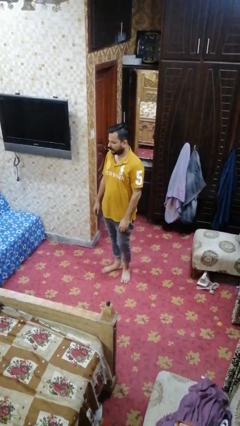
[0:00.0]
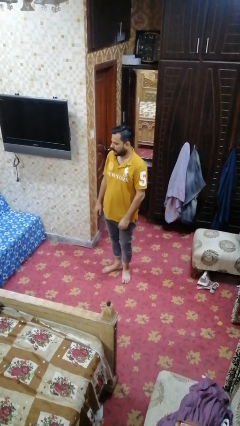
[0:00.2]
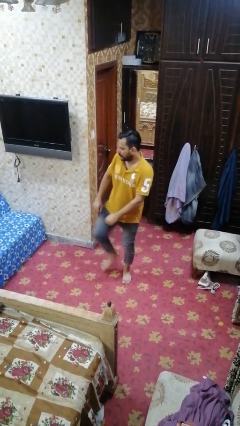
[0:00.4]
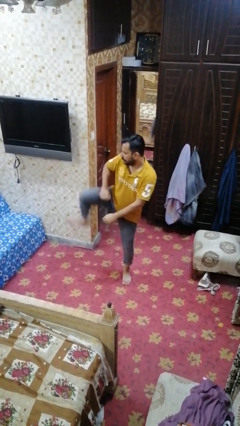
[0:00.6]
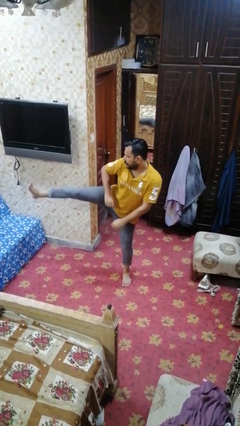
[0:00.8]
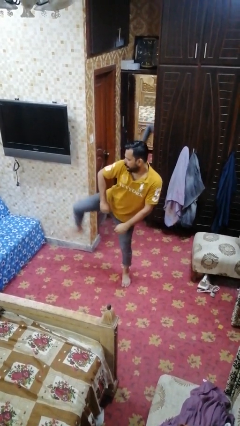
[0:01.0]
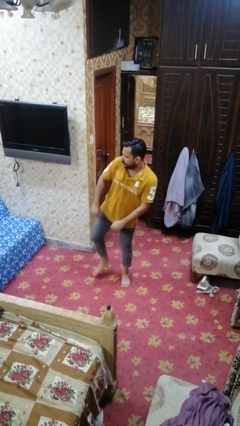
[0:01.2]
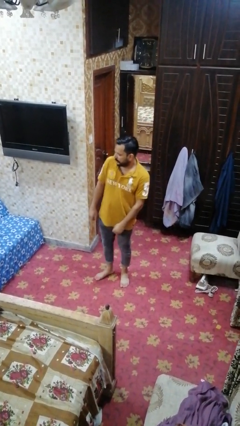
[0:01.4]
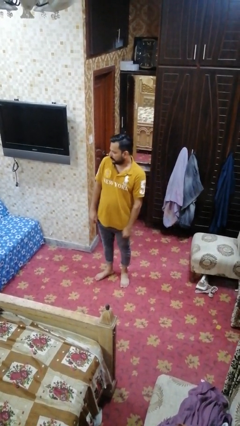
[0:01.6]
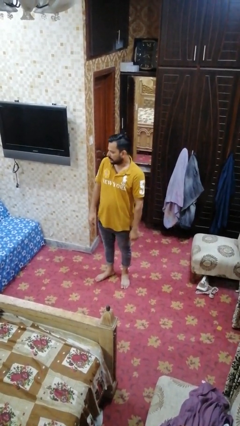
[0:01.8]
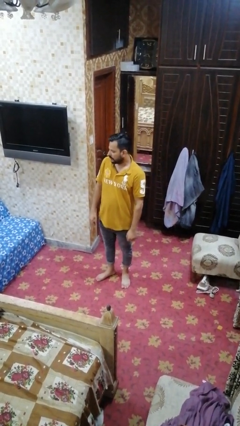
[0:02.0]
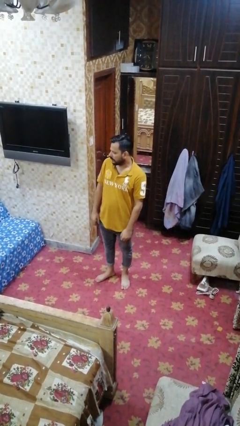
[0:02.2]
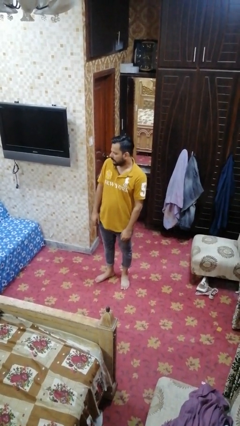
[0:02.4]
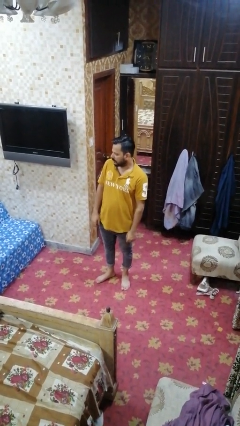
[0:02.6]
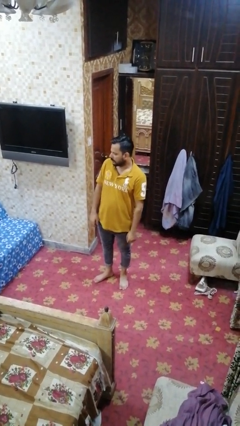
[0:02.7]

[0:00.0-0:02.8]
person karate kicks

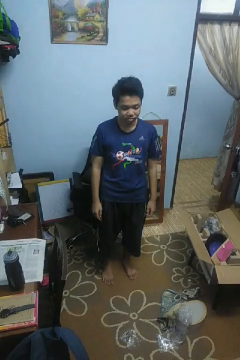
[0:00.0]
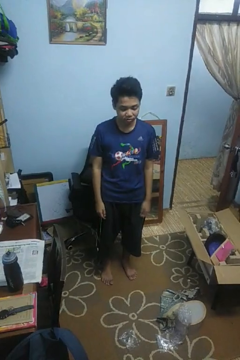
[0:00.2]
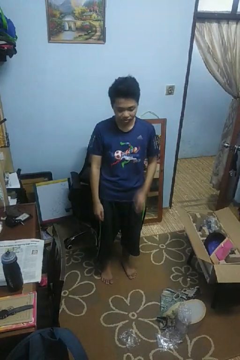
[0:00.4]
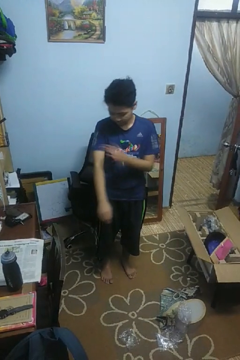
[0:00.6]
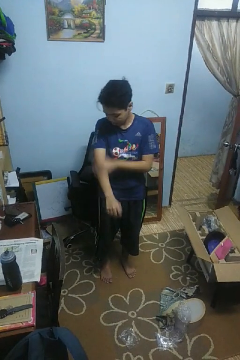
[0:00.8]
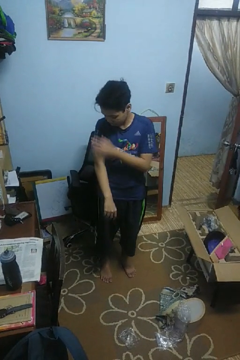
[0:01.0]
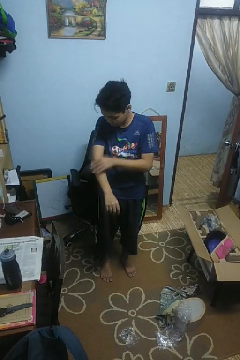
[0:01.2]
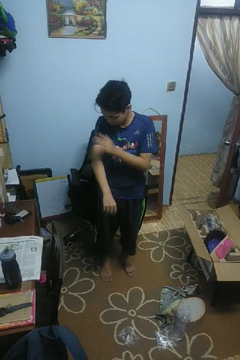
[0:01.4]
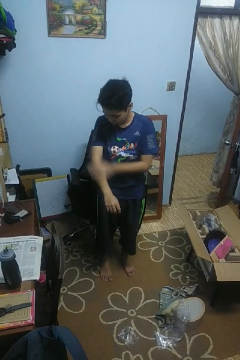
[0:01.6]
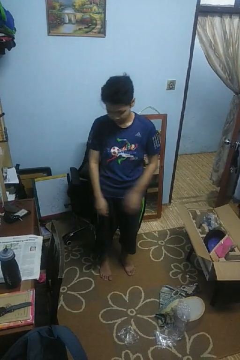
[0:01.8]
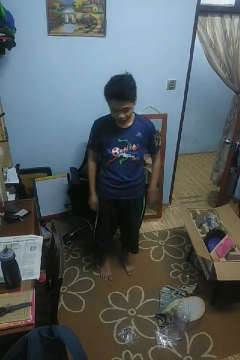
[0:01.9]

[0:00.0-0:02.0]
person swats bug

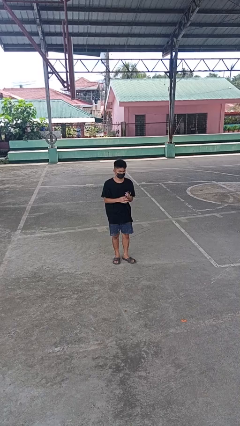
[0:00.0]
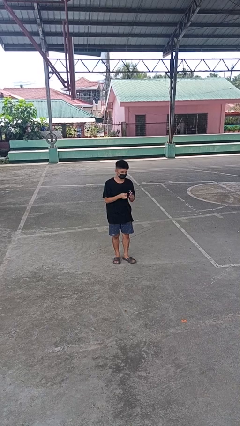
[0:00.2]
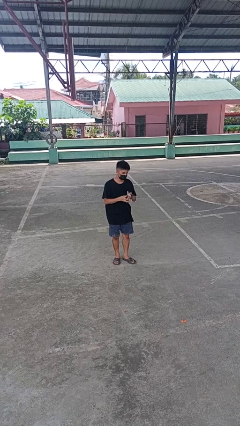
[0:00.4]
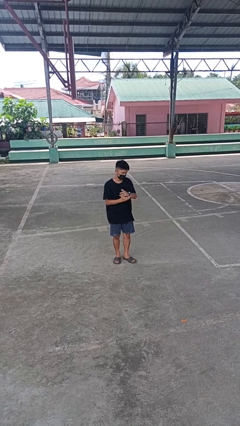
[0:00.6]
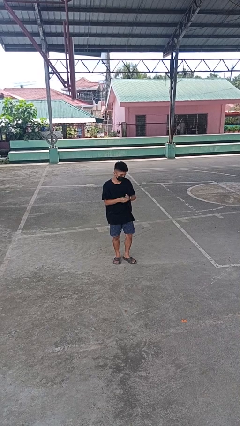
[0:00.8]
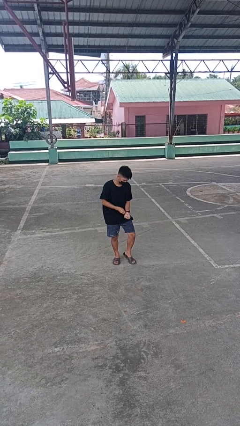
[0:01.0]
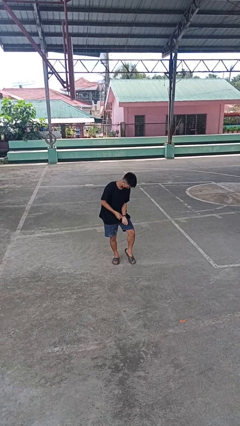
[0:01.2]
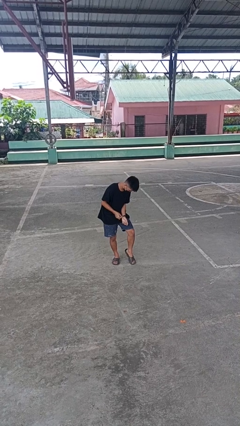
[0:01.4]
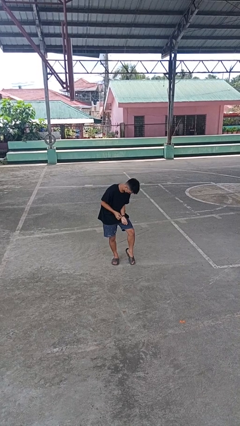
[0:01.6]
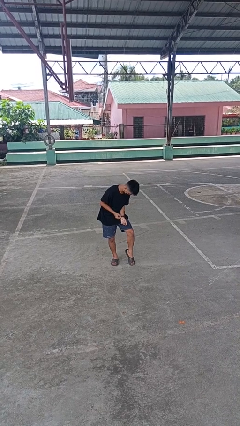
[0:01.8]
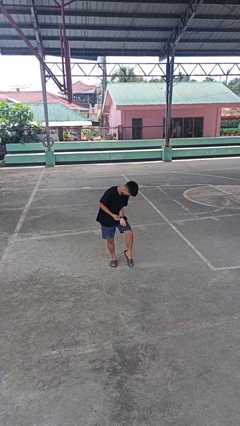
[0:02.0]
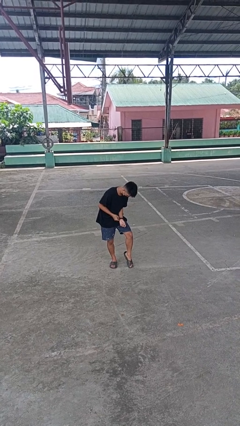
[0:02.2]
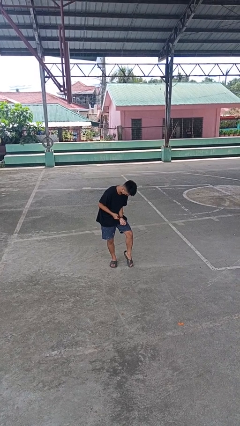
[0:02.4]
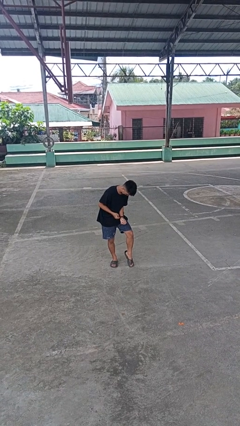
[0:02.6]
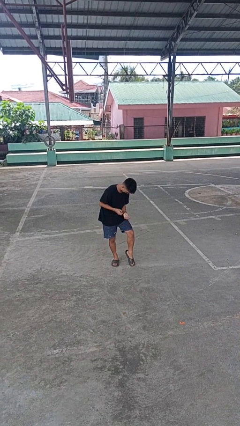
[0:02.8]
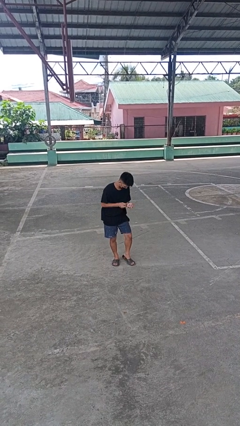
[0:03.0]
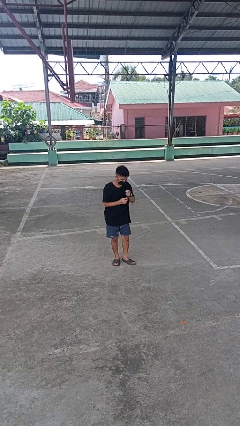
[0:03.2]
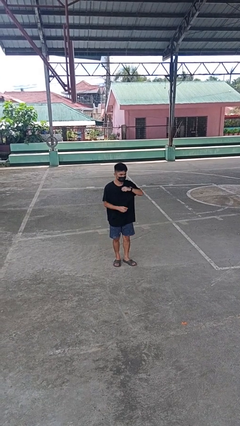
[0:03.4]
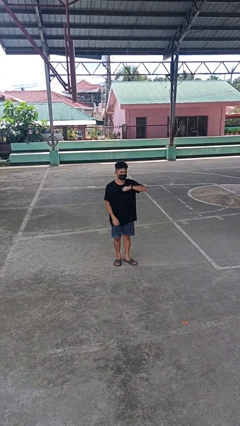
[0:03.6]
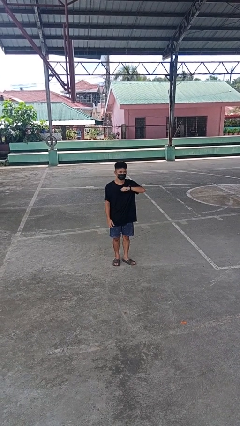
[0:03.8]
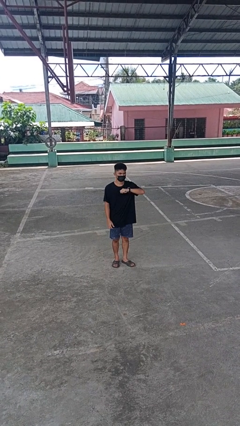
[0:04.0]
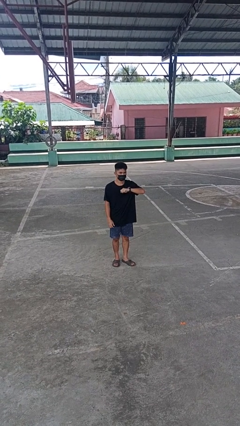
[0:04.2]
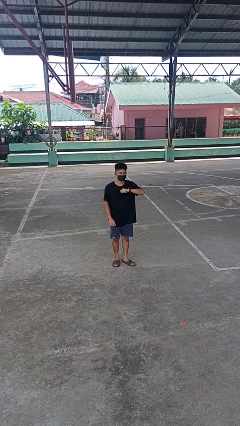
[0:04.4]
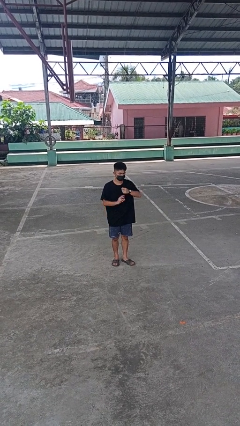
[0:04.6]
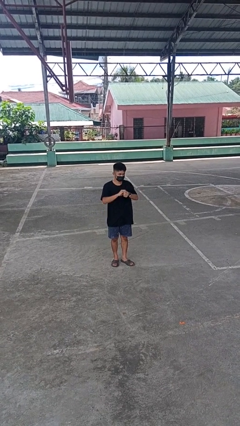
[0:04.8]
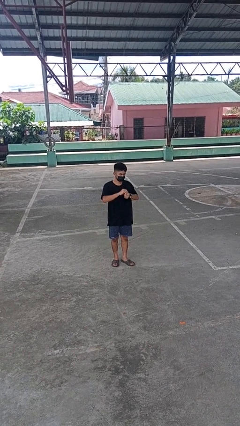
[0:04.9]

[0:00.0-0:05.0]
person puts on wristwatch

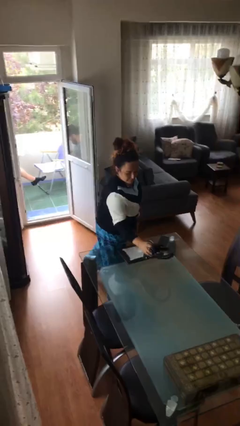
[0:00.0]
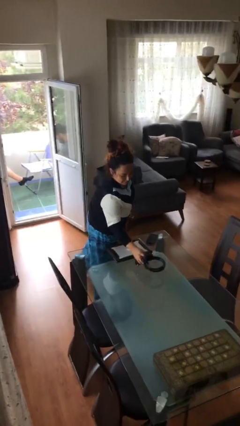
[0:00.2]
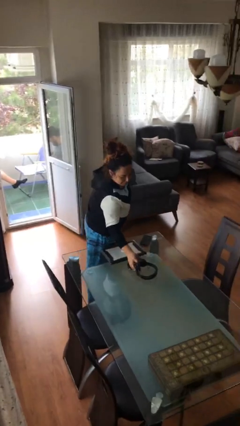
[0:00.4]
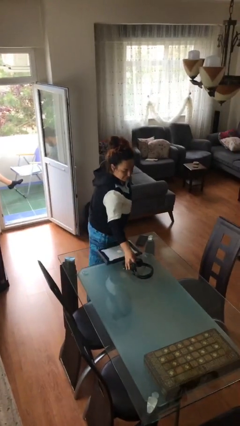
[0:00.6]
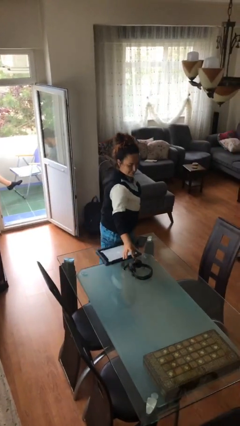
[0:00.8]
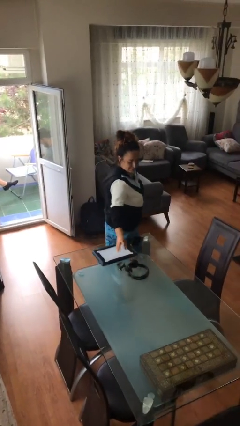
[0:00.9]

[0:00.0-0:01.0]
person puts down object on table

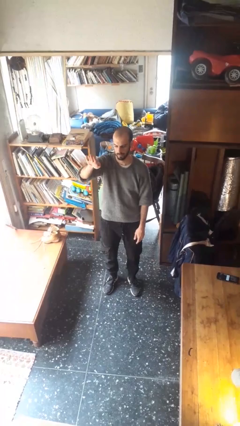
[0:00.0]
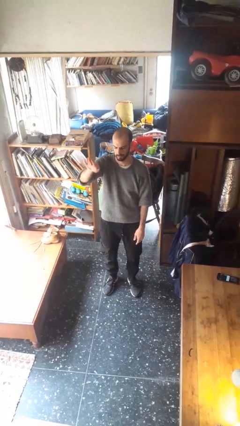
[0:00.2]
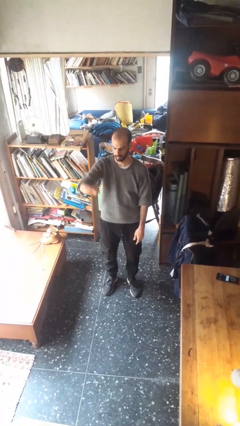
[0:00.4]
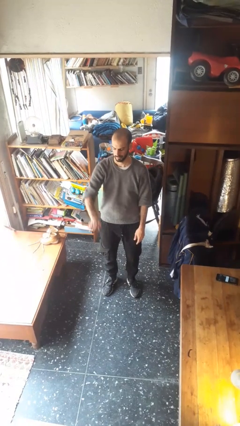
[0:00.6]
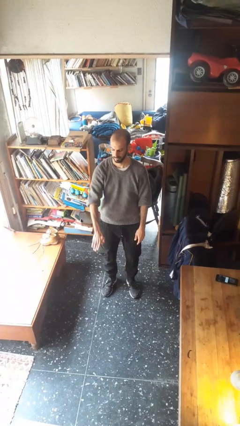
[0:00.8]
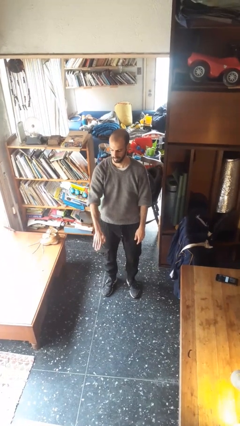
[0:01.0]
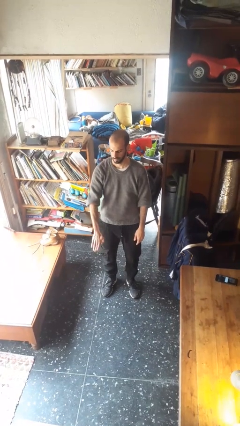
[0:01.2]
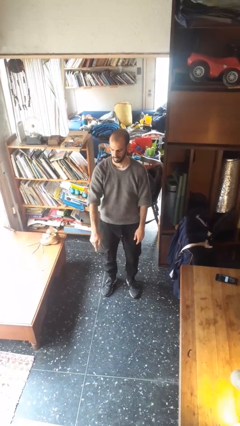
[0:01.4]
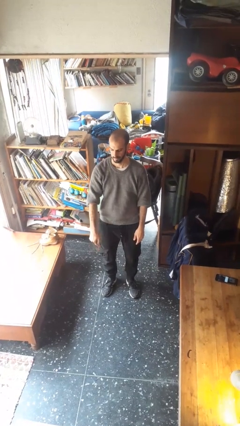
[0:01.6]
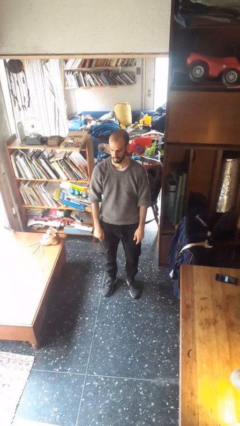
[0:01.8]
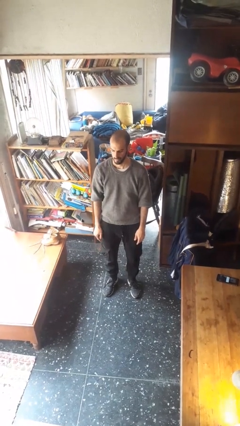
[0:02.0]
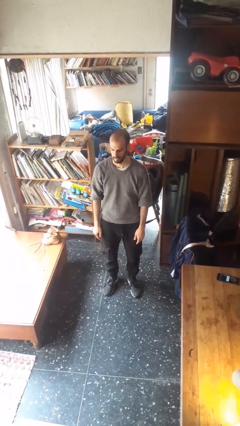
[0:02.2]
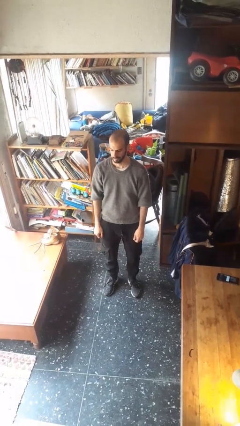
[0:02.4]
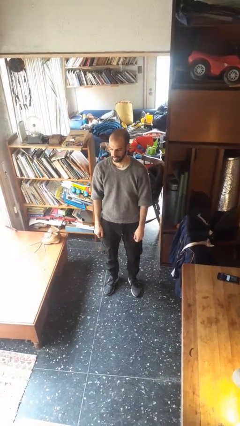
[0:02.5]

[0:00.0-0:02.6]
person gestures swipe down

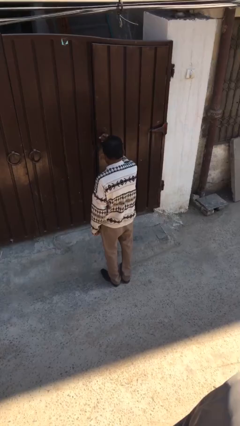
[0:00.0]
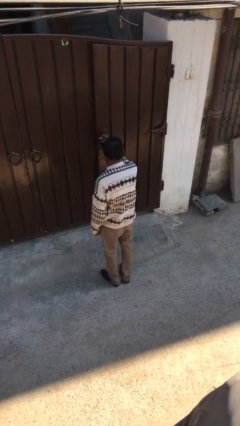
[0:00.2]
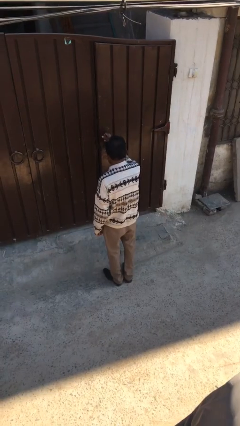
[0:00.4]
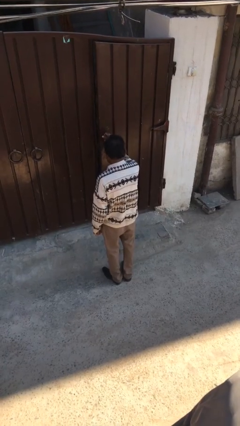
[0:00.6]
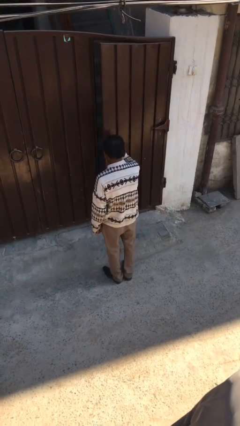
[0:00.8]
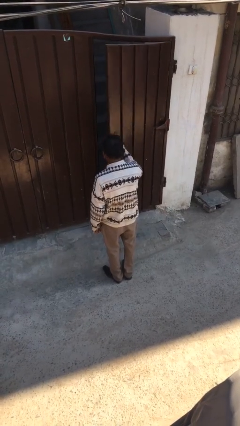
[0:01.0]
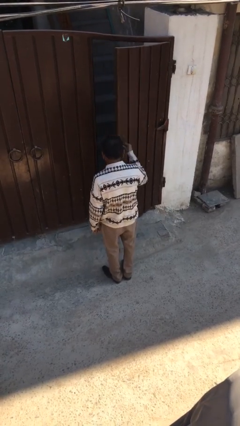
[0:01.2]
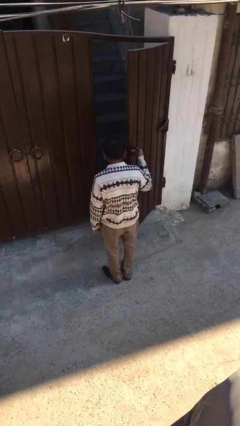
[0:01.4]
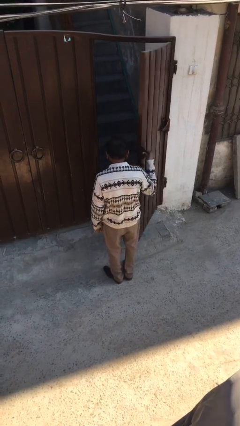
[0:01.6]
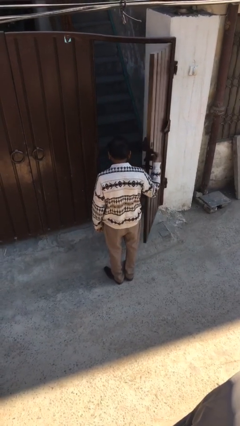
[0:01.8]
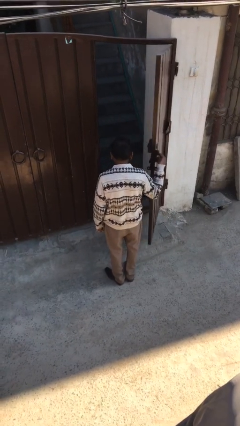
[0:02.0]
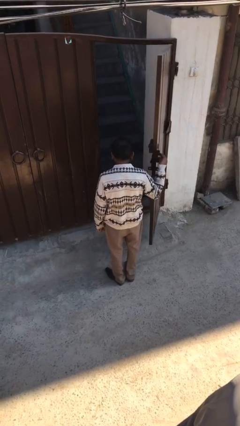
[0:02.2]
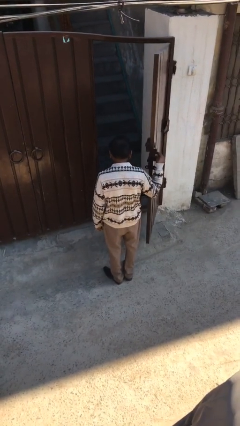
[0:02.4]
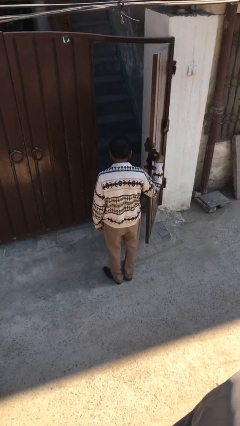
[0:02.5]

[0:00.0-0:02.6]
person opens facility door

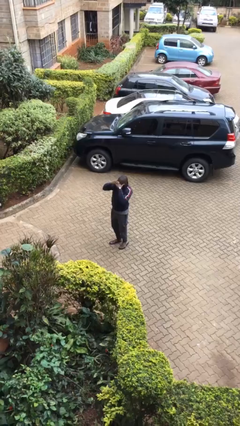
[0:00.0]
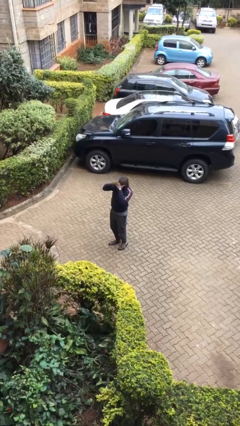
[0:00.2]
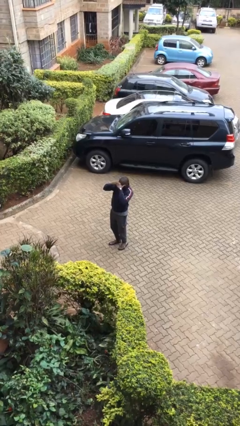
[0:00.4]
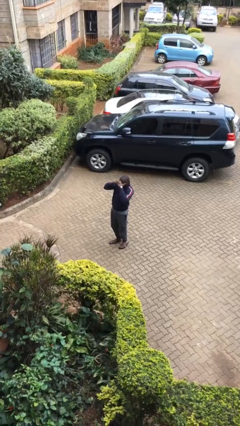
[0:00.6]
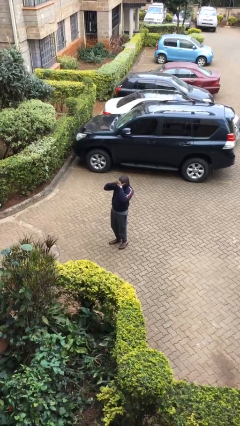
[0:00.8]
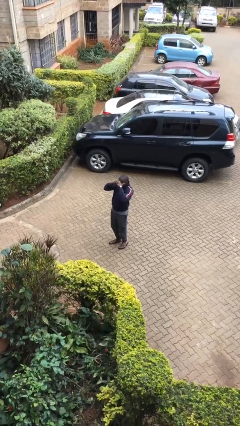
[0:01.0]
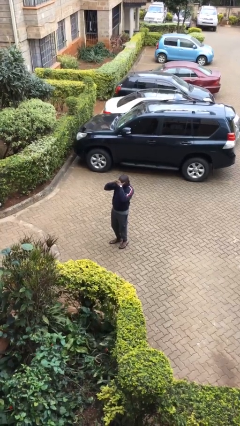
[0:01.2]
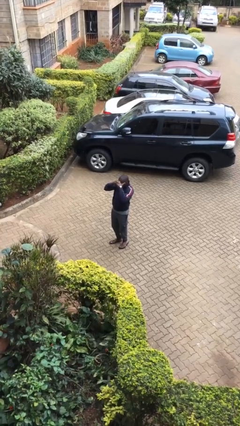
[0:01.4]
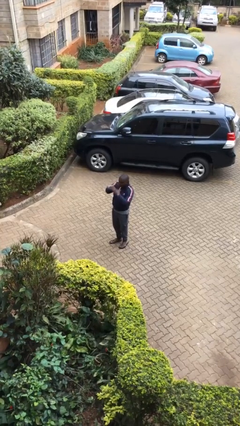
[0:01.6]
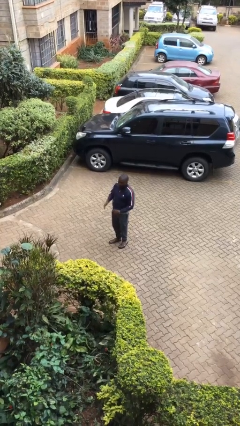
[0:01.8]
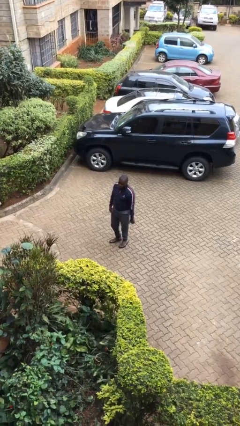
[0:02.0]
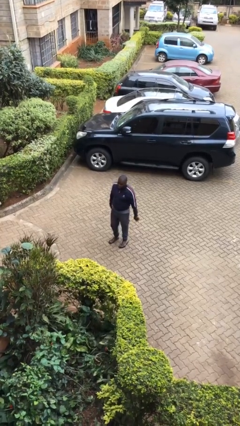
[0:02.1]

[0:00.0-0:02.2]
person shades eyes
